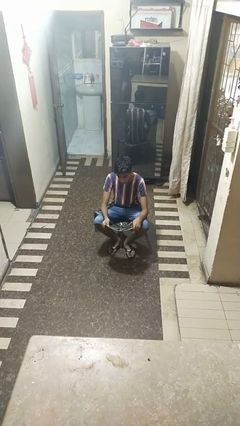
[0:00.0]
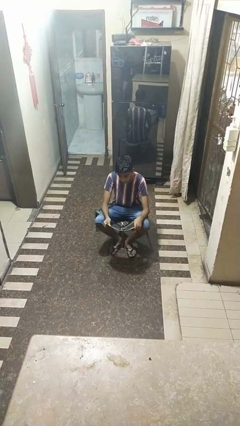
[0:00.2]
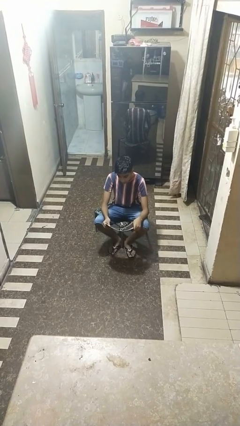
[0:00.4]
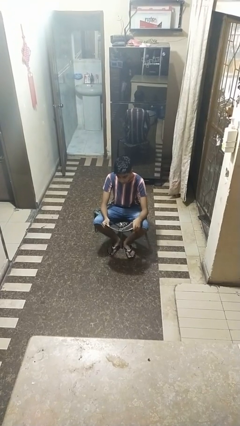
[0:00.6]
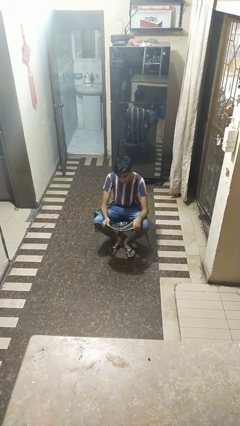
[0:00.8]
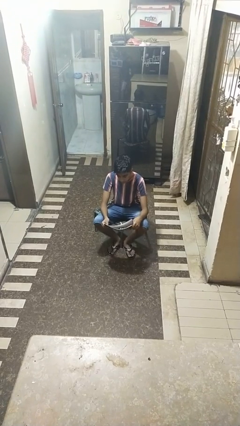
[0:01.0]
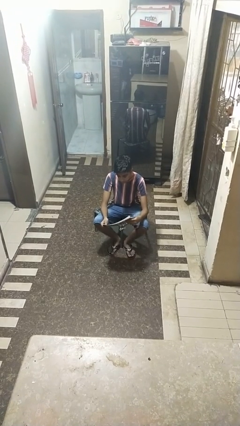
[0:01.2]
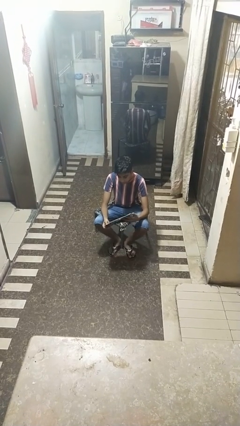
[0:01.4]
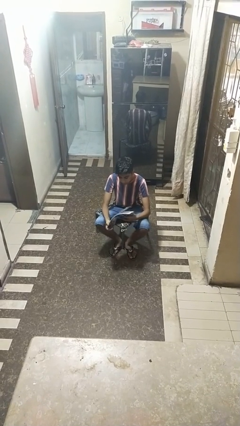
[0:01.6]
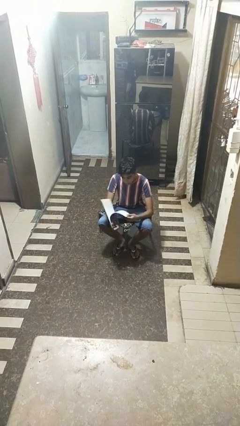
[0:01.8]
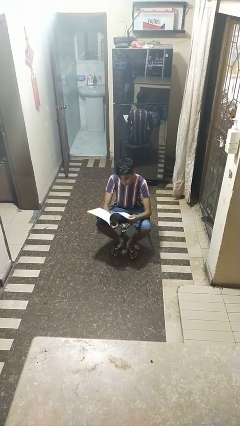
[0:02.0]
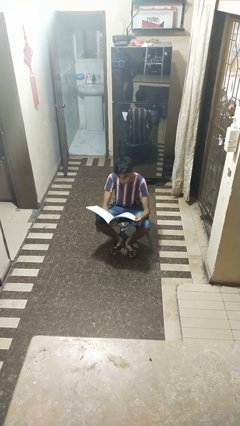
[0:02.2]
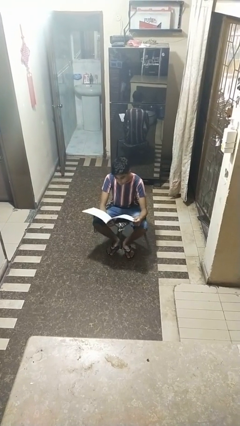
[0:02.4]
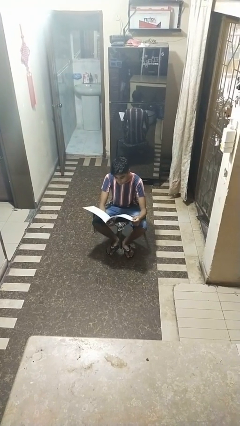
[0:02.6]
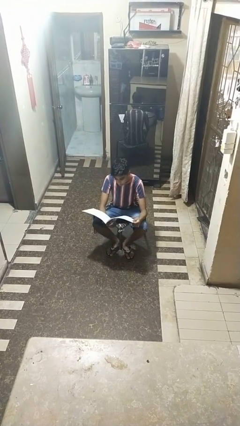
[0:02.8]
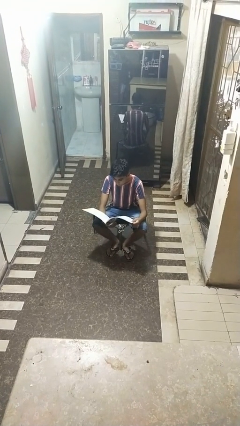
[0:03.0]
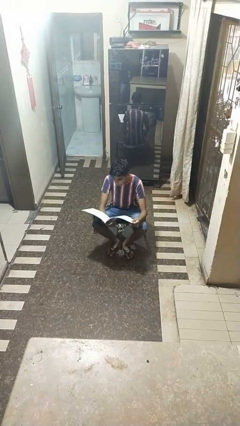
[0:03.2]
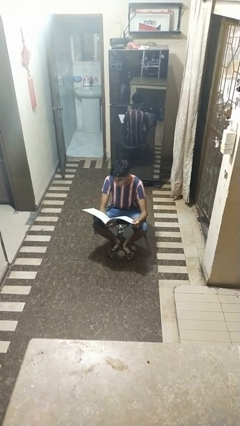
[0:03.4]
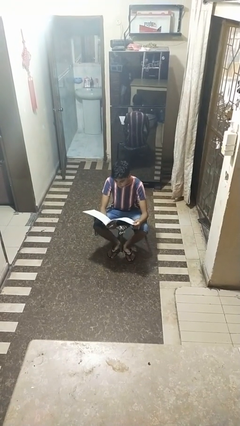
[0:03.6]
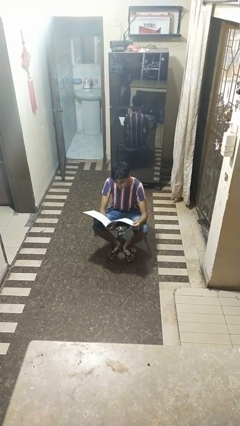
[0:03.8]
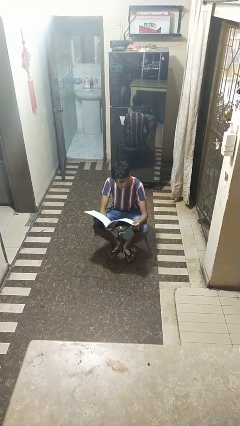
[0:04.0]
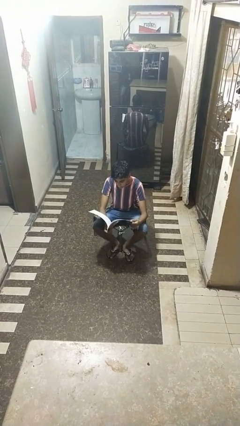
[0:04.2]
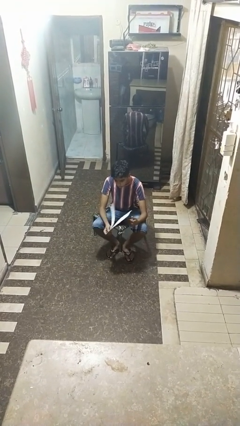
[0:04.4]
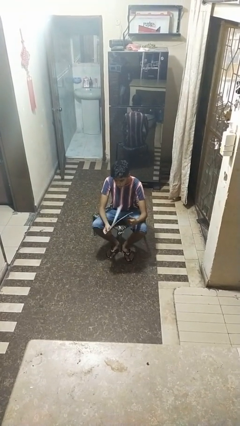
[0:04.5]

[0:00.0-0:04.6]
person reads magazine

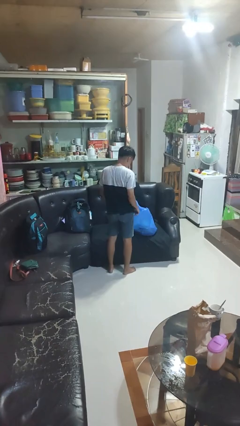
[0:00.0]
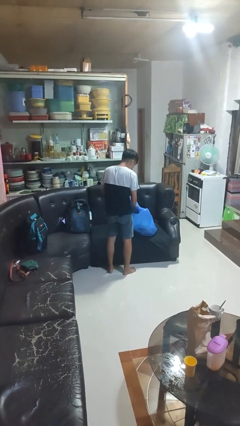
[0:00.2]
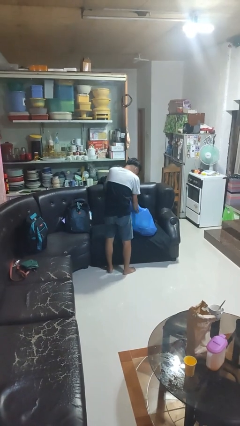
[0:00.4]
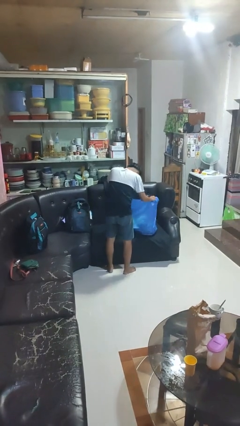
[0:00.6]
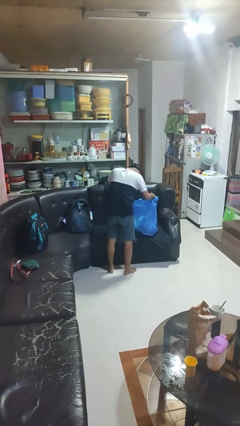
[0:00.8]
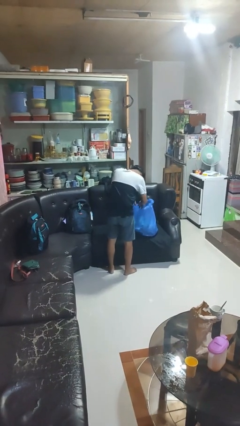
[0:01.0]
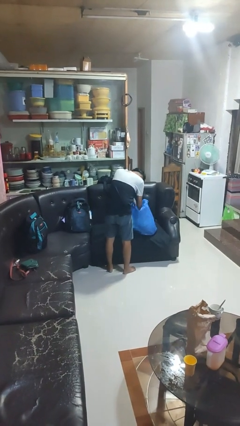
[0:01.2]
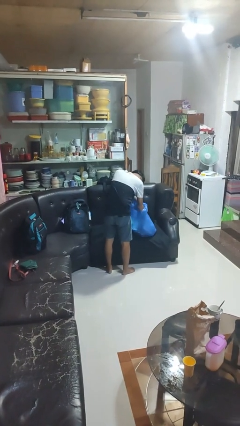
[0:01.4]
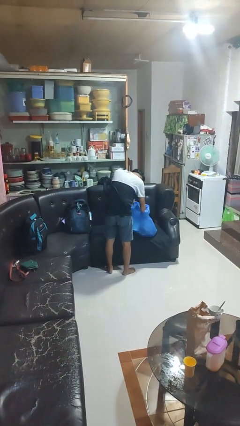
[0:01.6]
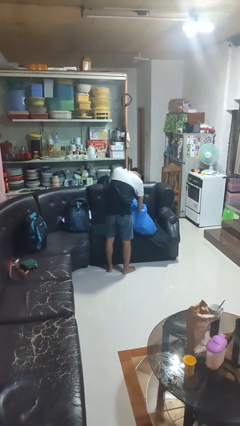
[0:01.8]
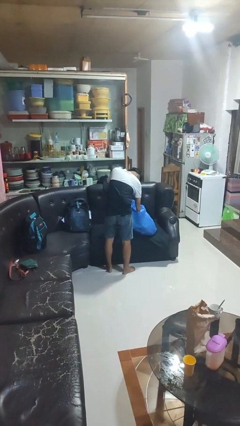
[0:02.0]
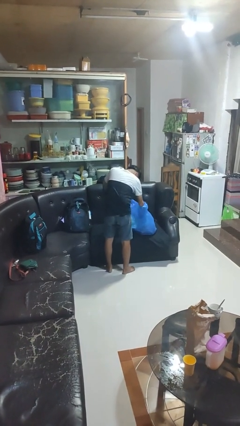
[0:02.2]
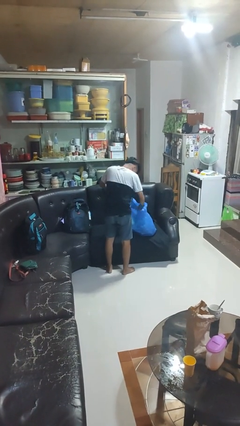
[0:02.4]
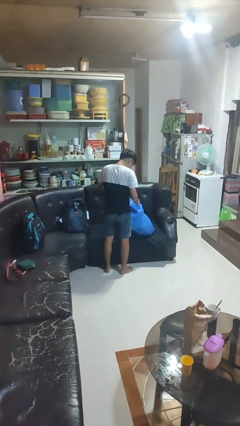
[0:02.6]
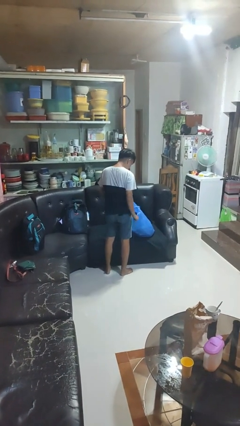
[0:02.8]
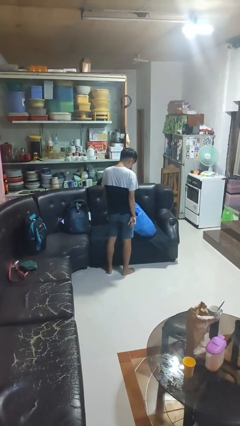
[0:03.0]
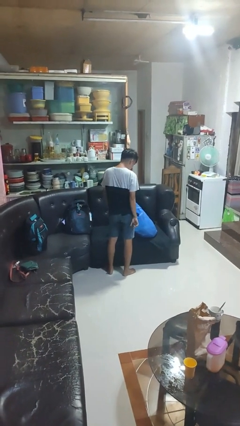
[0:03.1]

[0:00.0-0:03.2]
person searches in bag

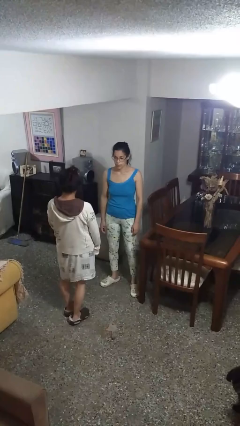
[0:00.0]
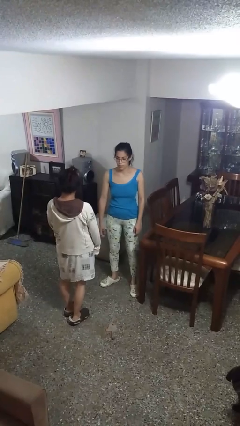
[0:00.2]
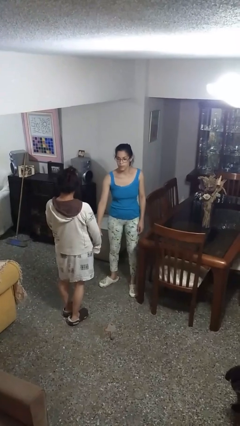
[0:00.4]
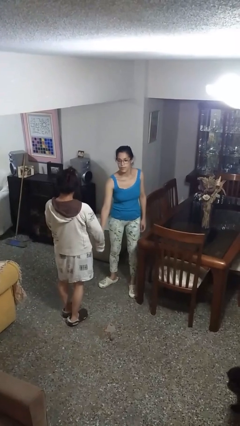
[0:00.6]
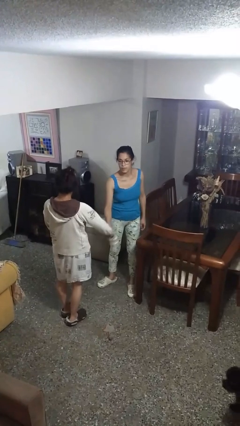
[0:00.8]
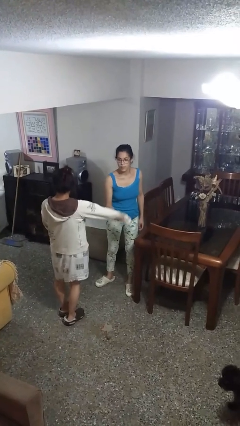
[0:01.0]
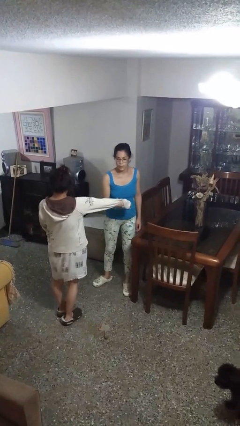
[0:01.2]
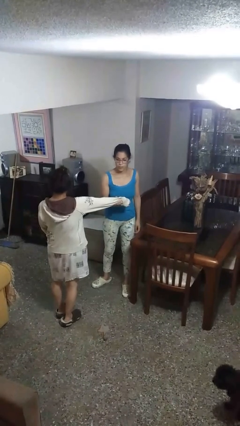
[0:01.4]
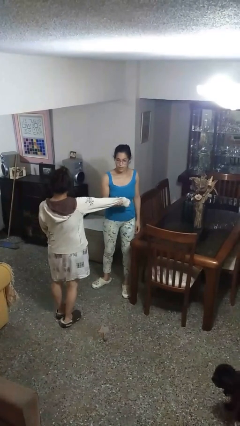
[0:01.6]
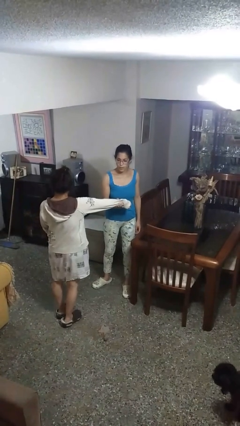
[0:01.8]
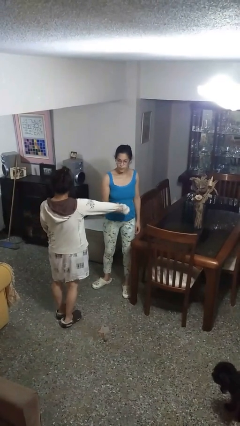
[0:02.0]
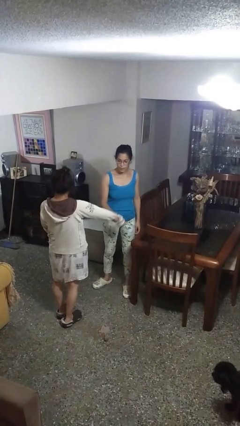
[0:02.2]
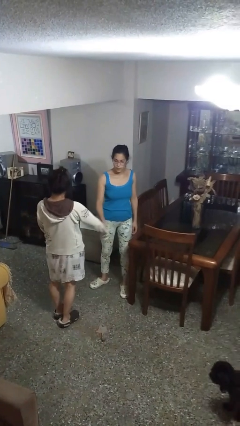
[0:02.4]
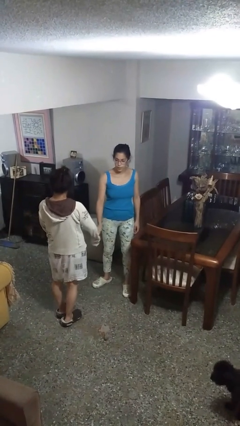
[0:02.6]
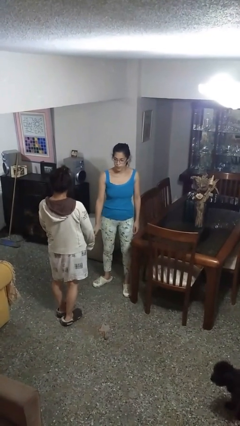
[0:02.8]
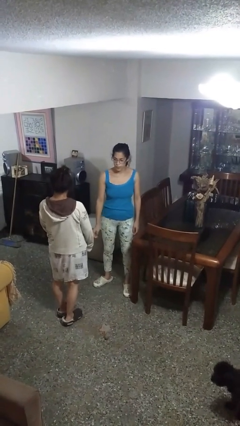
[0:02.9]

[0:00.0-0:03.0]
person grabs person by forearm

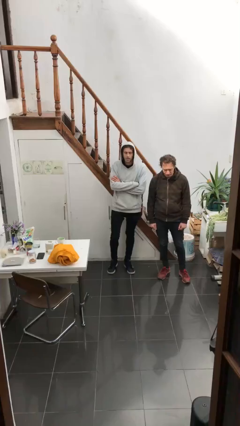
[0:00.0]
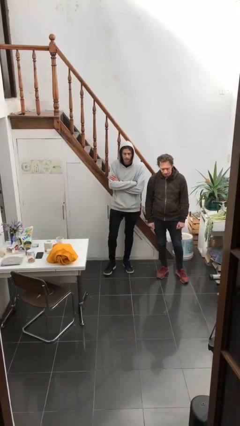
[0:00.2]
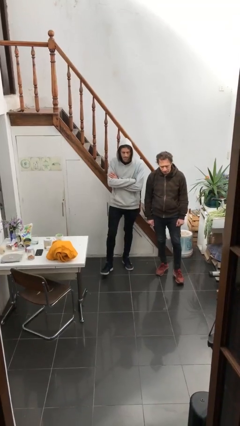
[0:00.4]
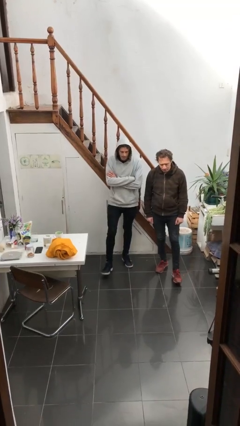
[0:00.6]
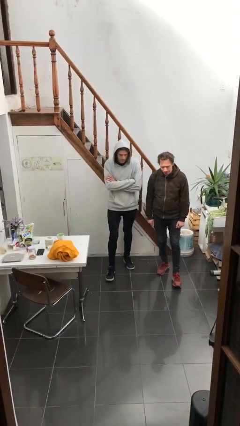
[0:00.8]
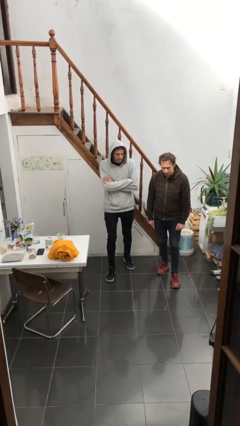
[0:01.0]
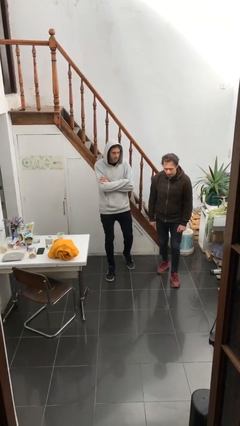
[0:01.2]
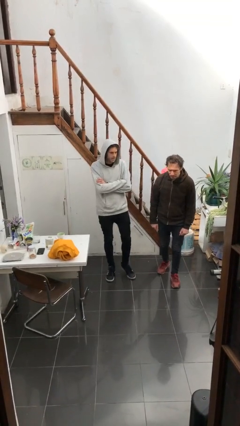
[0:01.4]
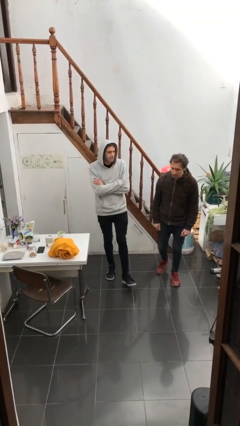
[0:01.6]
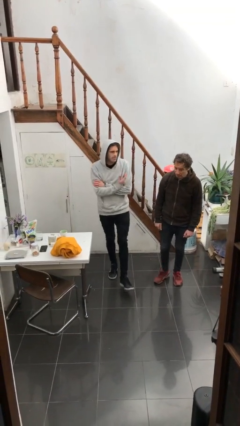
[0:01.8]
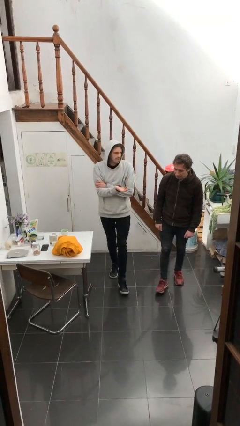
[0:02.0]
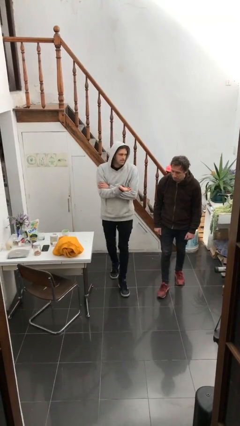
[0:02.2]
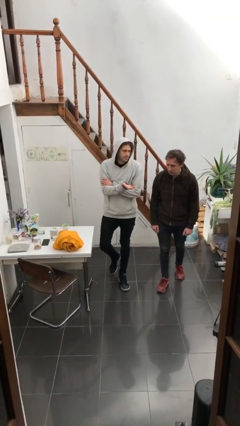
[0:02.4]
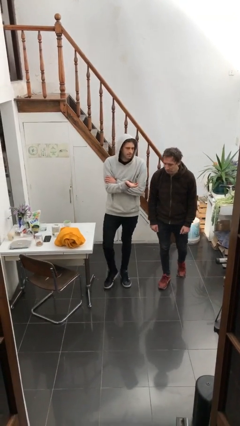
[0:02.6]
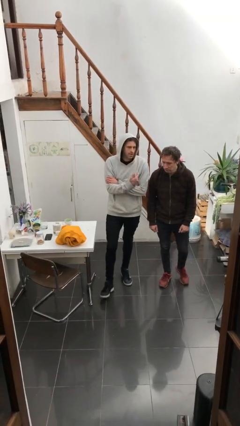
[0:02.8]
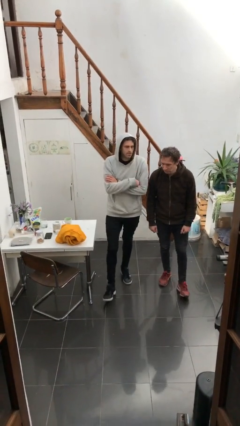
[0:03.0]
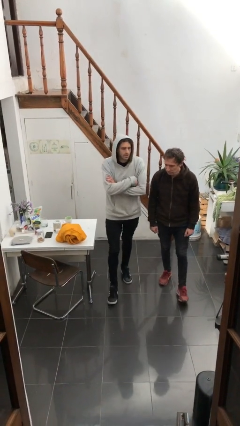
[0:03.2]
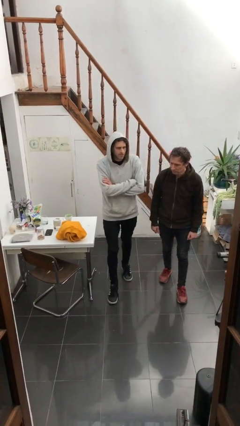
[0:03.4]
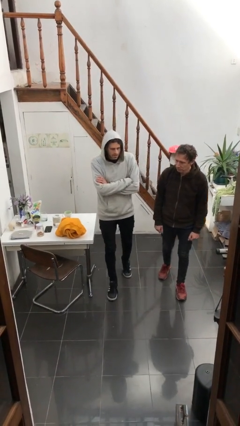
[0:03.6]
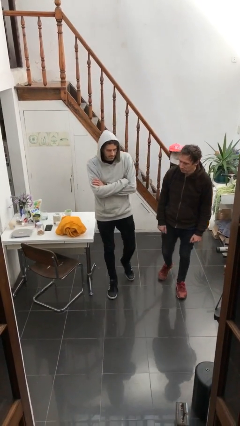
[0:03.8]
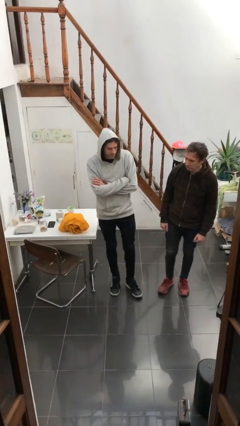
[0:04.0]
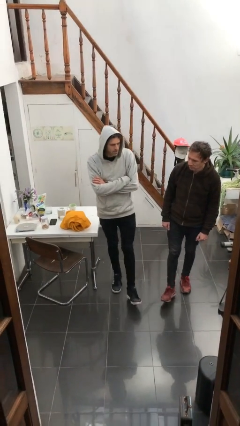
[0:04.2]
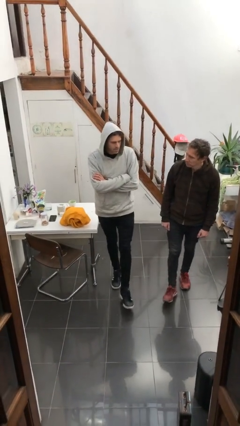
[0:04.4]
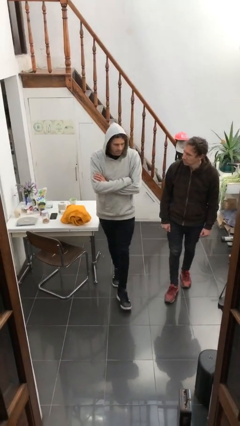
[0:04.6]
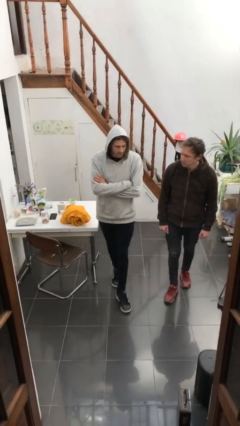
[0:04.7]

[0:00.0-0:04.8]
person talks to person

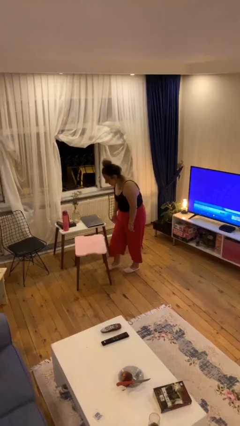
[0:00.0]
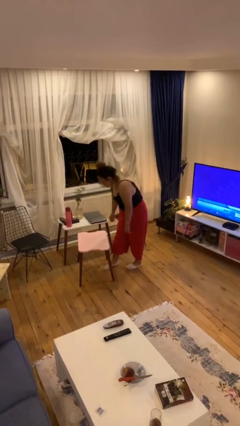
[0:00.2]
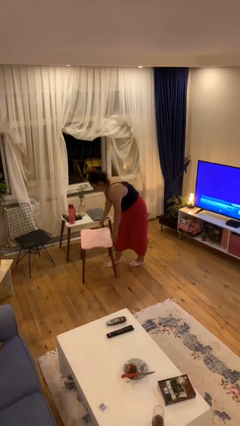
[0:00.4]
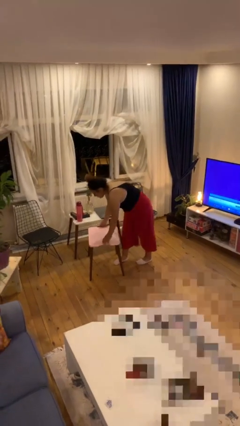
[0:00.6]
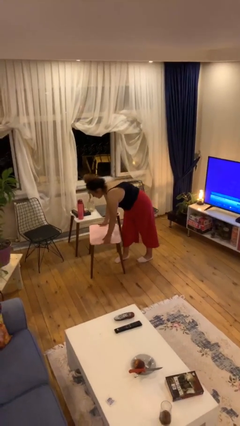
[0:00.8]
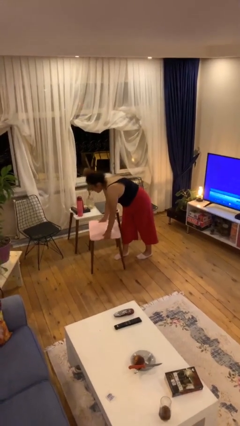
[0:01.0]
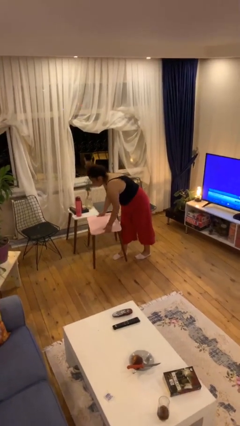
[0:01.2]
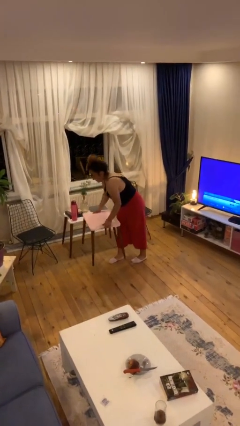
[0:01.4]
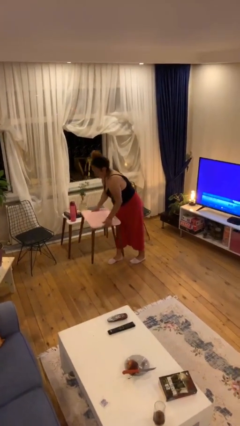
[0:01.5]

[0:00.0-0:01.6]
person picks up object from floor

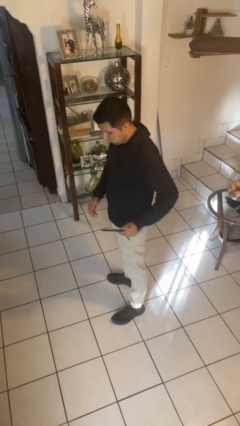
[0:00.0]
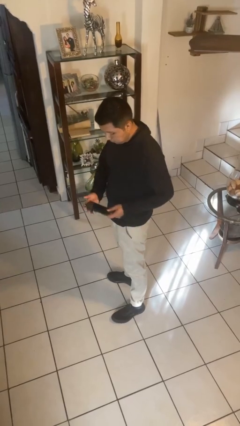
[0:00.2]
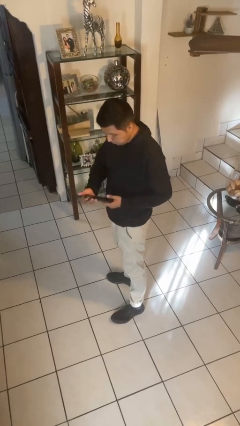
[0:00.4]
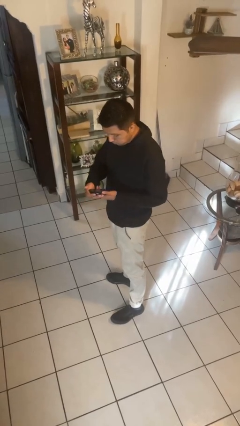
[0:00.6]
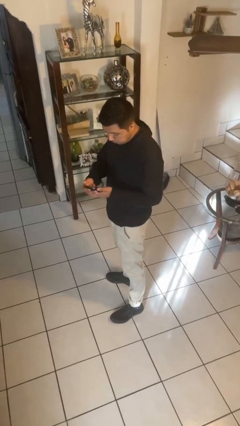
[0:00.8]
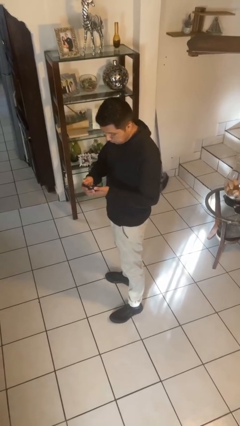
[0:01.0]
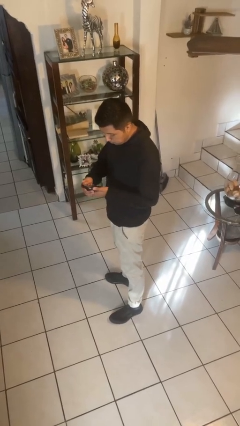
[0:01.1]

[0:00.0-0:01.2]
person takes phone from pocket
